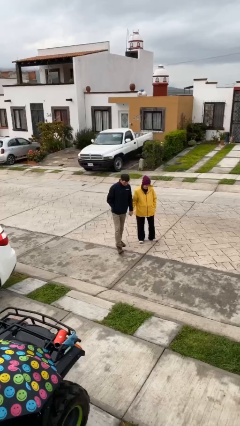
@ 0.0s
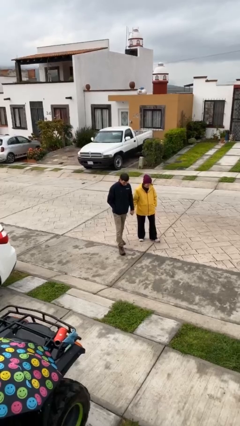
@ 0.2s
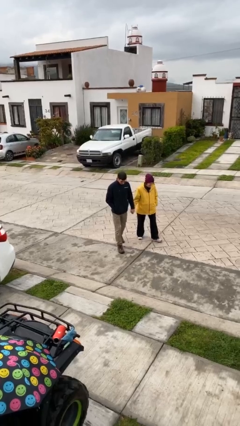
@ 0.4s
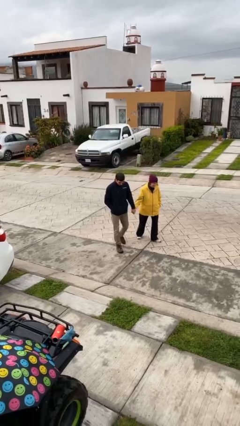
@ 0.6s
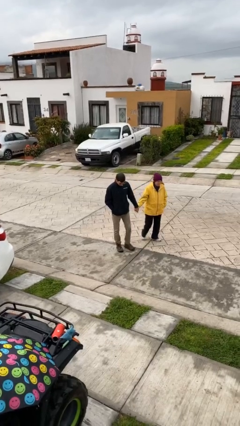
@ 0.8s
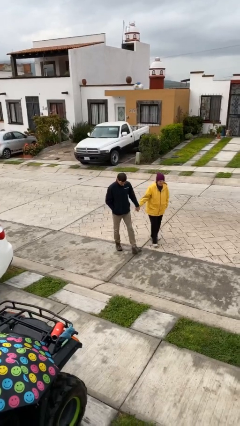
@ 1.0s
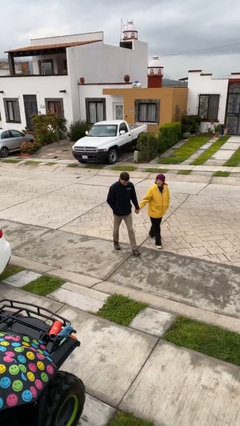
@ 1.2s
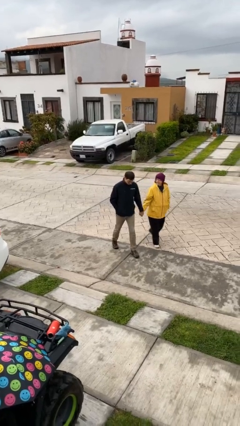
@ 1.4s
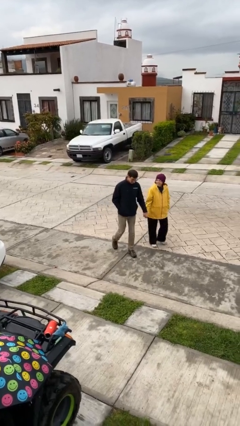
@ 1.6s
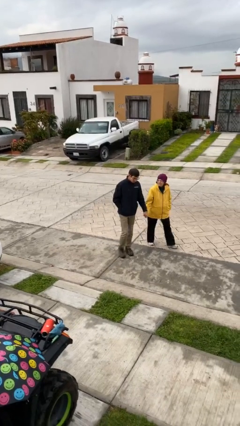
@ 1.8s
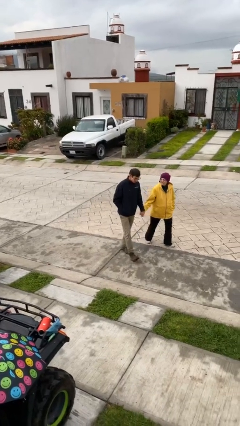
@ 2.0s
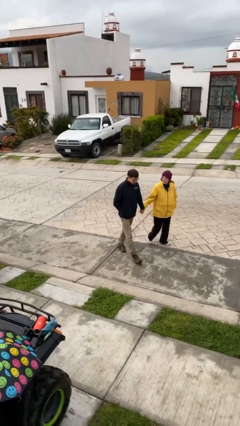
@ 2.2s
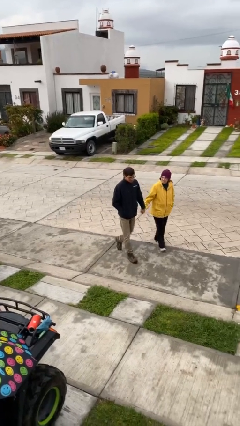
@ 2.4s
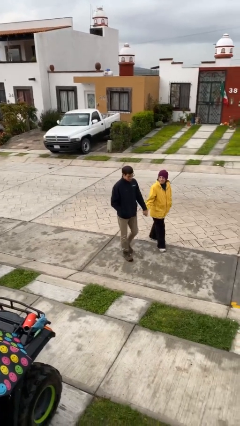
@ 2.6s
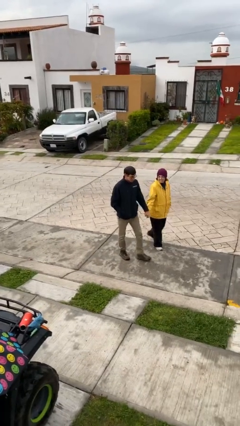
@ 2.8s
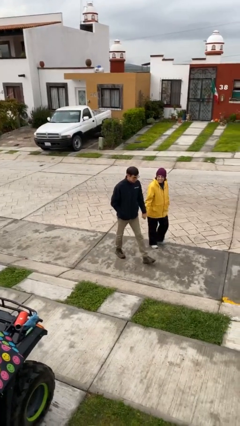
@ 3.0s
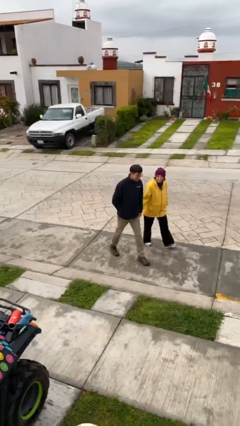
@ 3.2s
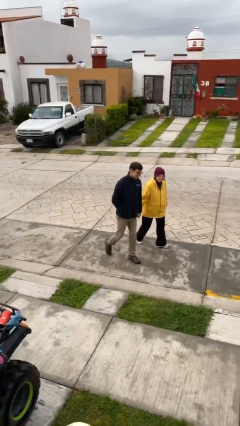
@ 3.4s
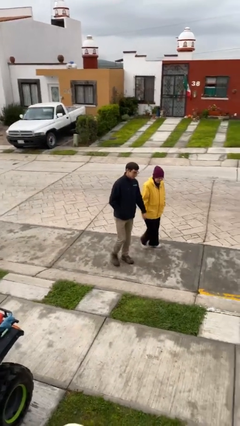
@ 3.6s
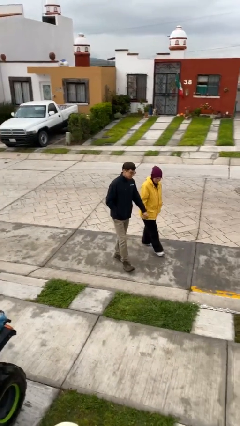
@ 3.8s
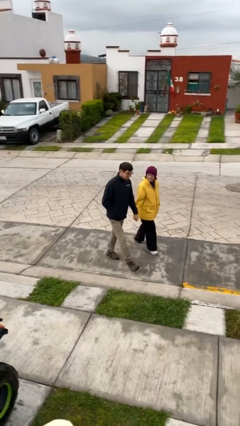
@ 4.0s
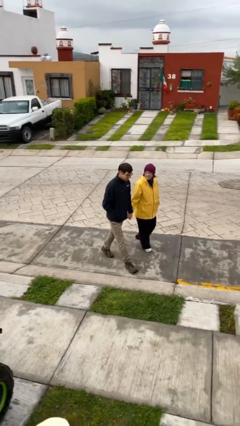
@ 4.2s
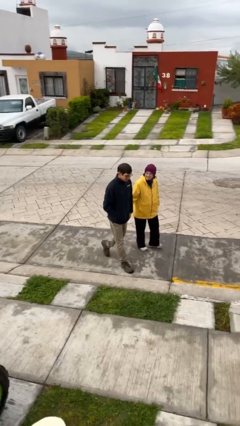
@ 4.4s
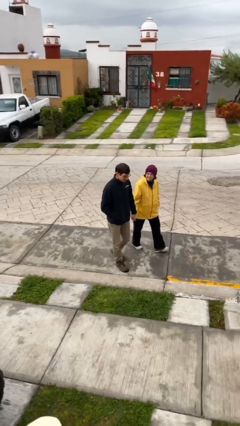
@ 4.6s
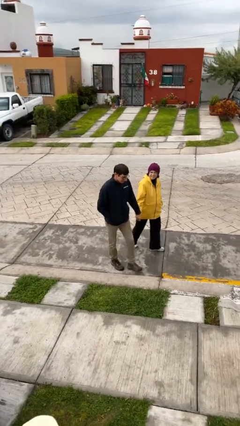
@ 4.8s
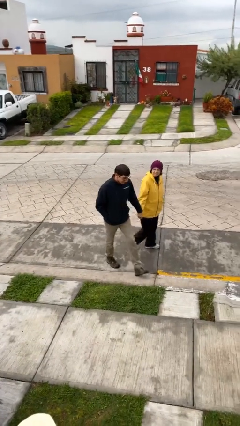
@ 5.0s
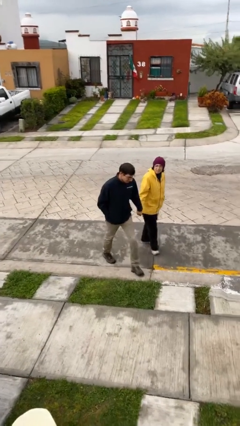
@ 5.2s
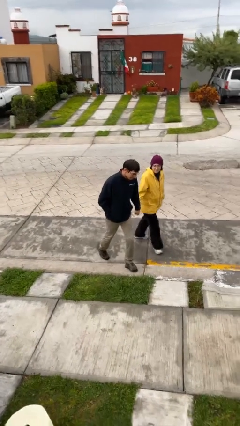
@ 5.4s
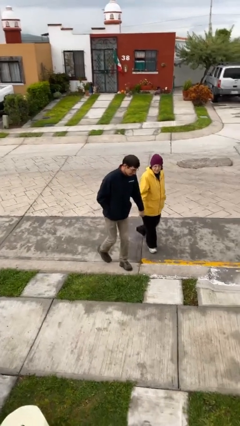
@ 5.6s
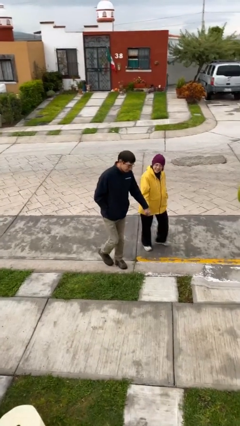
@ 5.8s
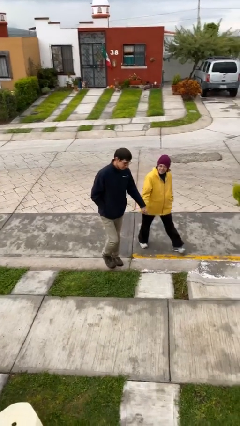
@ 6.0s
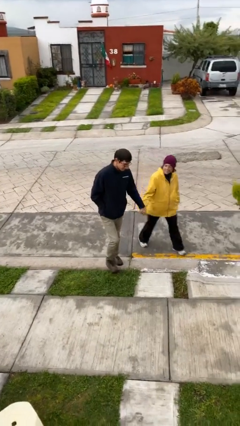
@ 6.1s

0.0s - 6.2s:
person holds hand

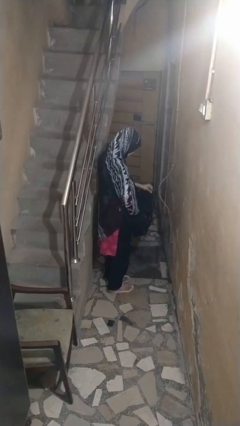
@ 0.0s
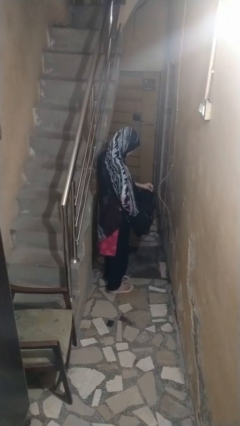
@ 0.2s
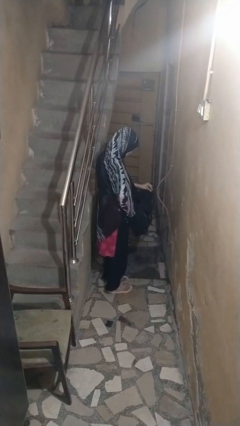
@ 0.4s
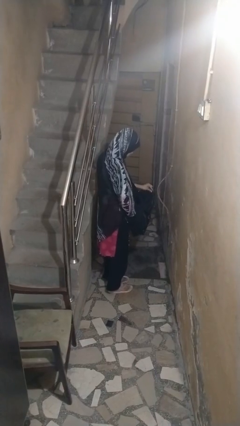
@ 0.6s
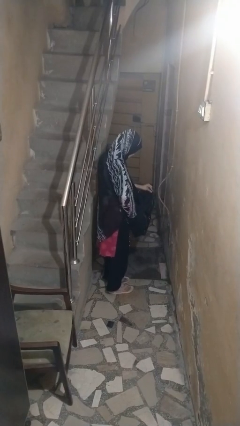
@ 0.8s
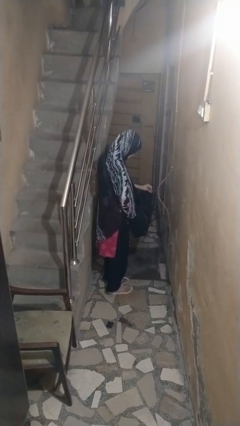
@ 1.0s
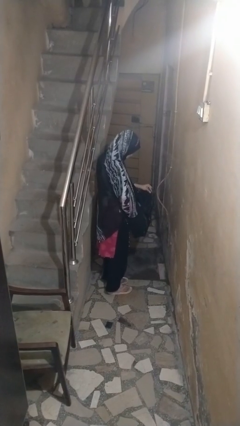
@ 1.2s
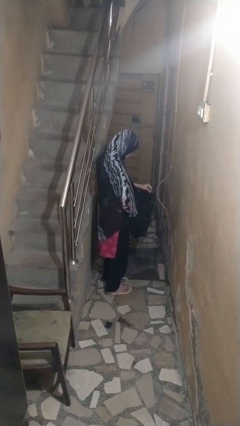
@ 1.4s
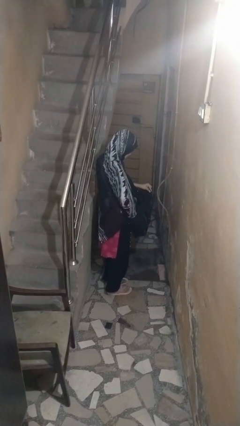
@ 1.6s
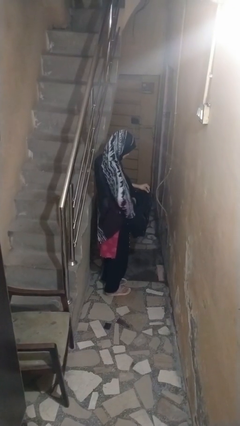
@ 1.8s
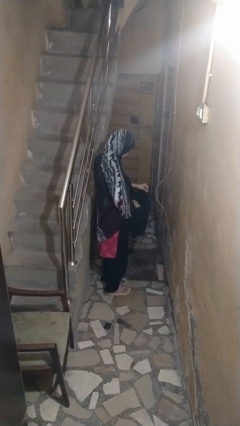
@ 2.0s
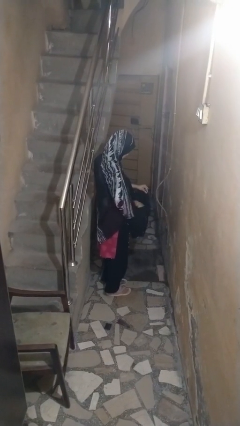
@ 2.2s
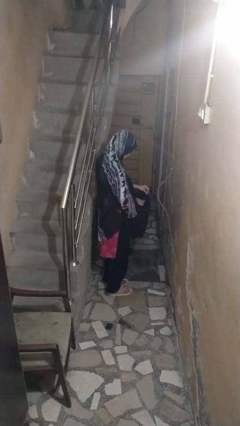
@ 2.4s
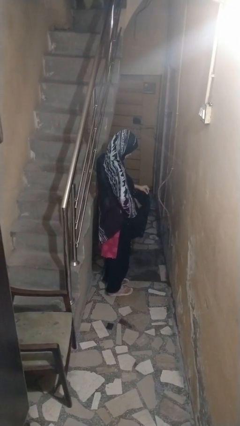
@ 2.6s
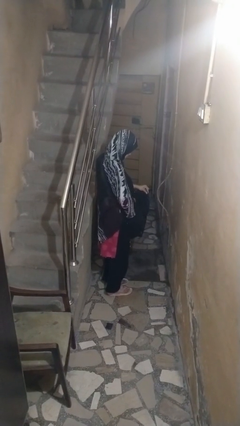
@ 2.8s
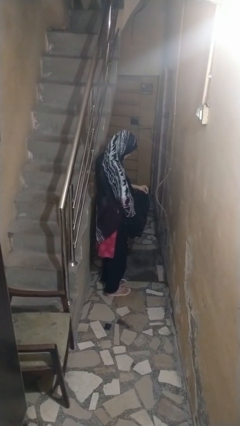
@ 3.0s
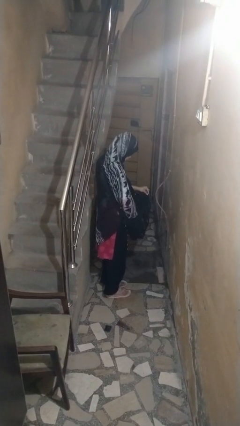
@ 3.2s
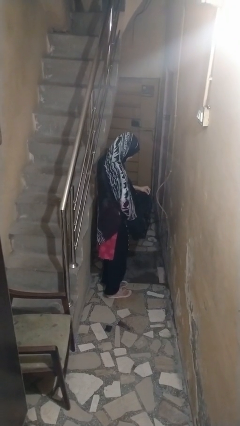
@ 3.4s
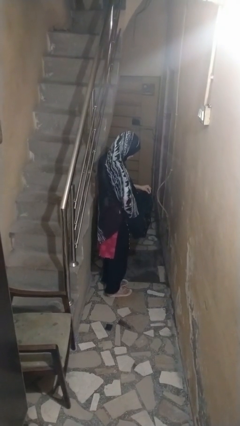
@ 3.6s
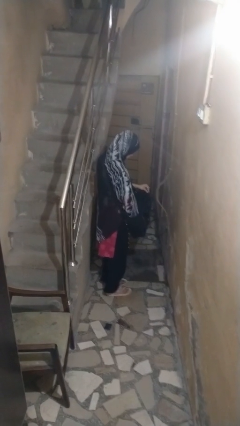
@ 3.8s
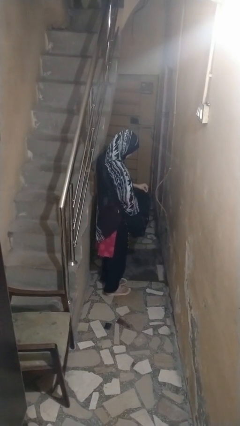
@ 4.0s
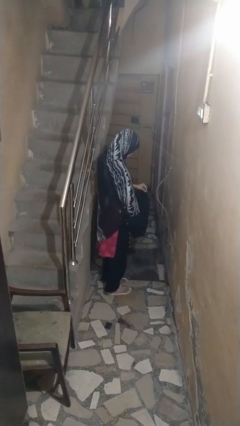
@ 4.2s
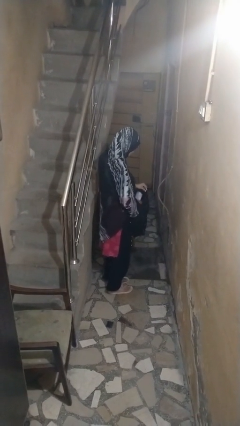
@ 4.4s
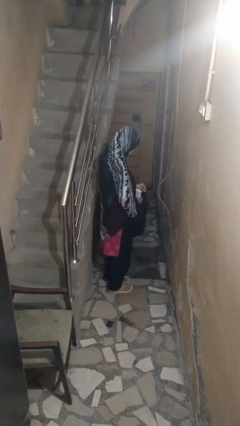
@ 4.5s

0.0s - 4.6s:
person searches in backpack

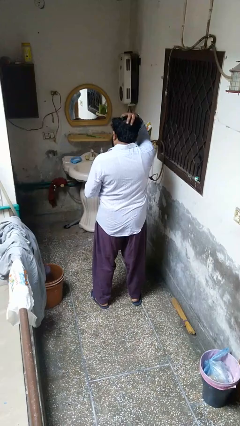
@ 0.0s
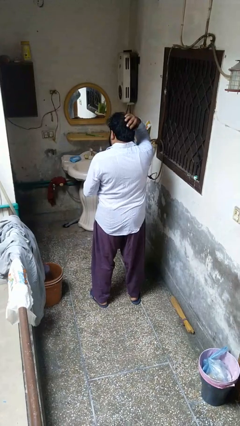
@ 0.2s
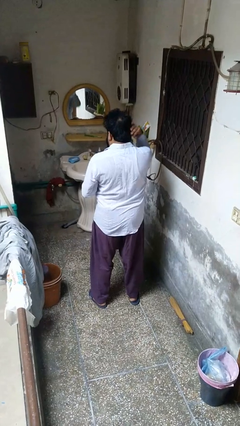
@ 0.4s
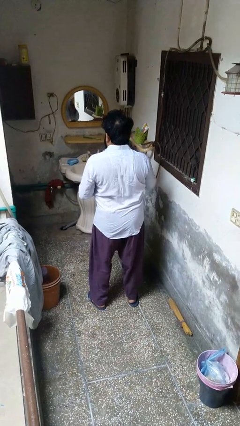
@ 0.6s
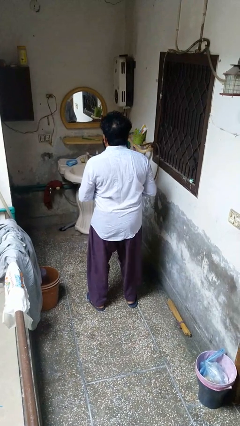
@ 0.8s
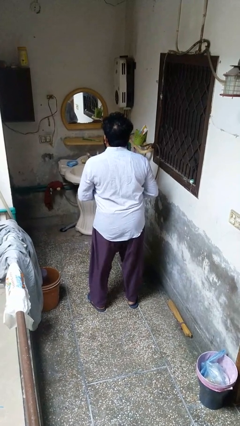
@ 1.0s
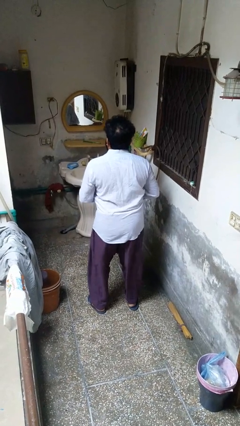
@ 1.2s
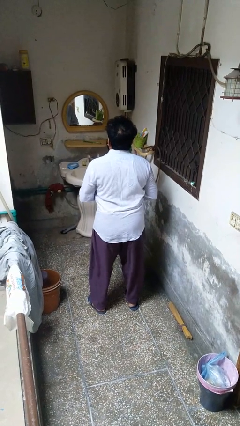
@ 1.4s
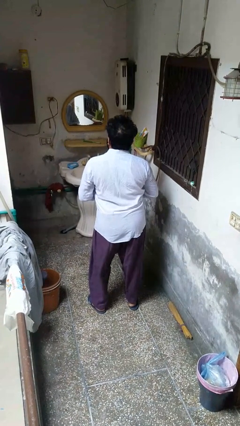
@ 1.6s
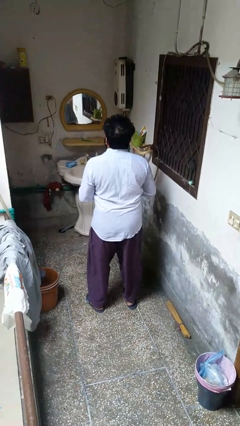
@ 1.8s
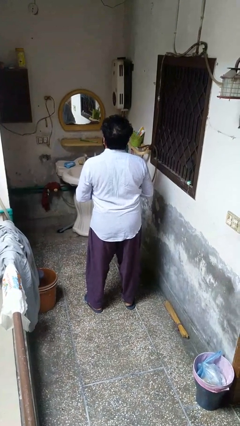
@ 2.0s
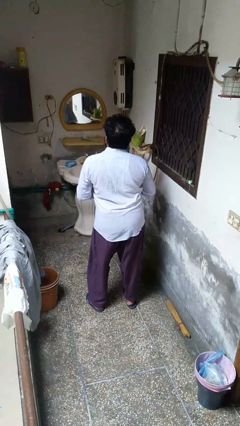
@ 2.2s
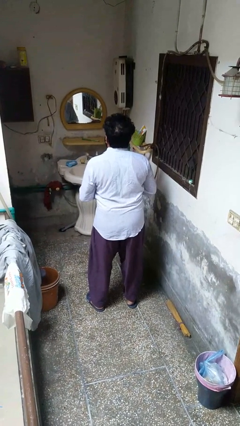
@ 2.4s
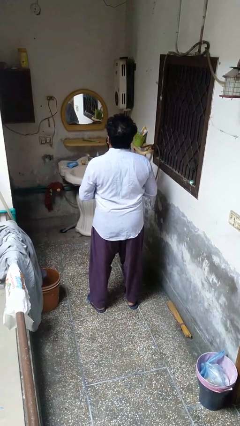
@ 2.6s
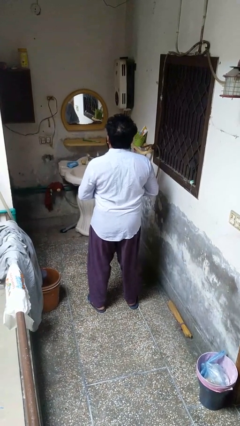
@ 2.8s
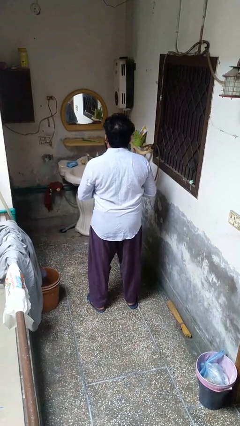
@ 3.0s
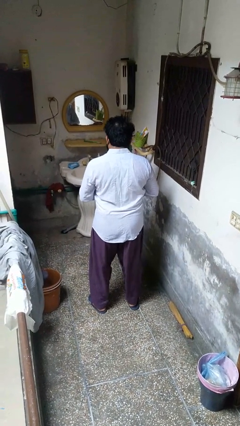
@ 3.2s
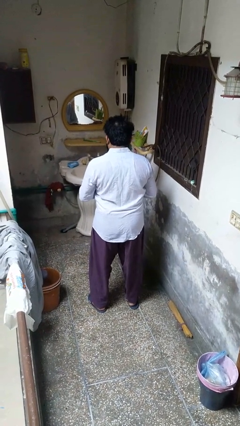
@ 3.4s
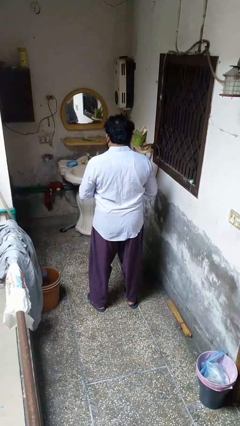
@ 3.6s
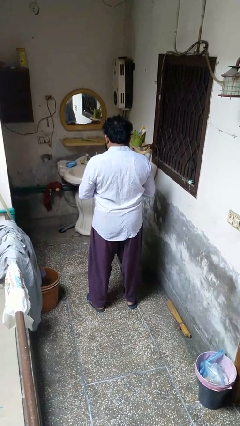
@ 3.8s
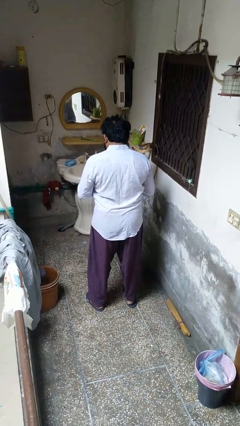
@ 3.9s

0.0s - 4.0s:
person wiggles hips

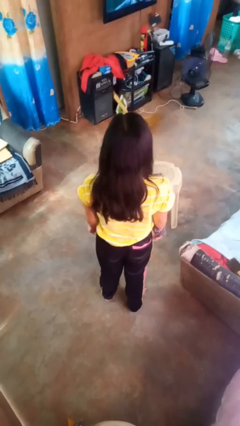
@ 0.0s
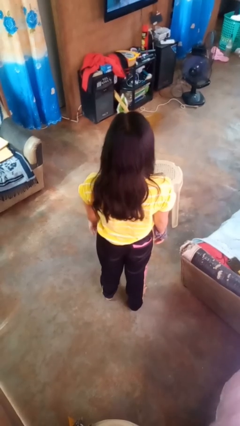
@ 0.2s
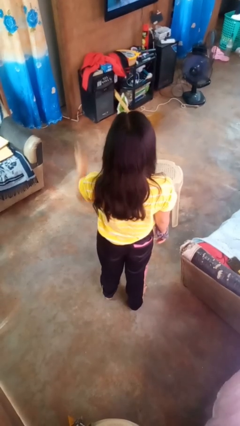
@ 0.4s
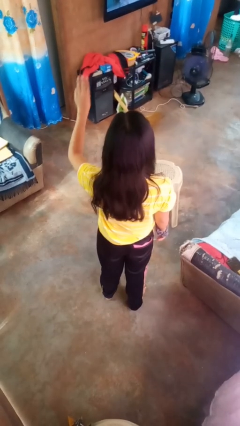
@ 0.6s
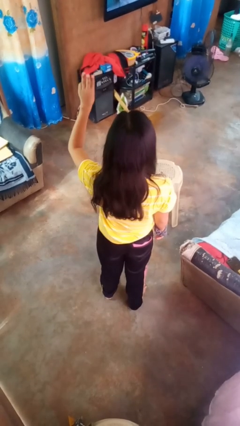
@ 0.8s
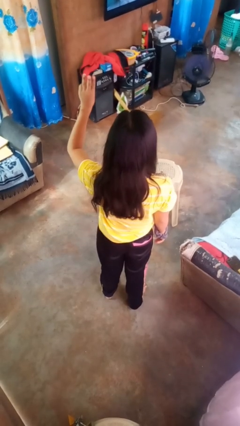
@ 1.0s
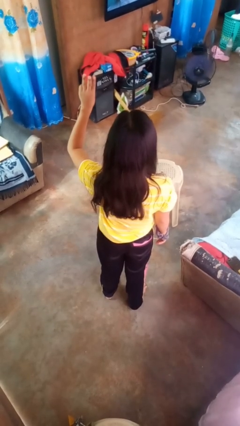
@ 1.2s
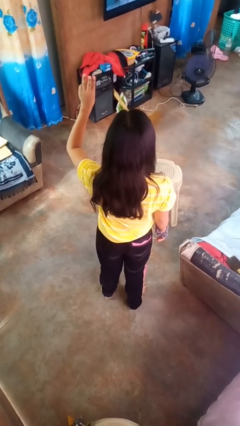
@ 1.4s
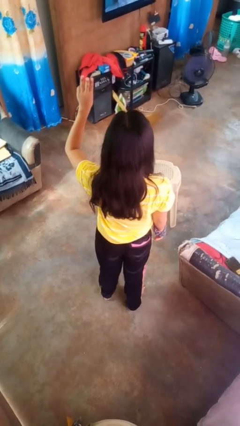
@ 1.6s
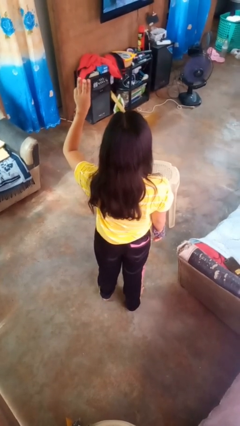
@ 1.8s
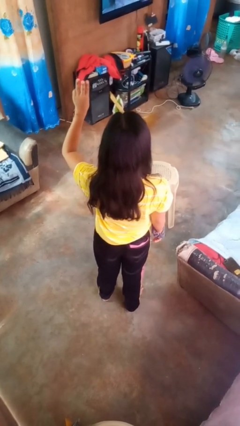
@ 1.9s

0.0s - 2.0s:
person gestures number three

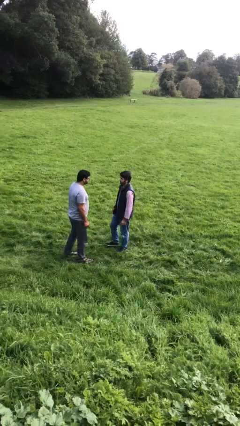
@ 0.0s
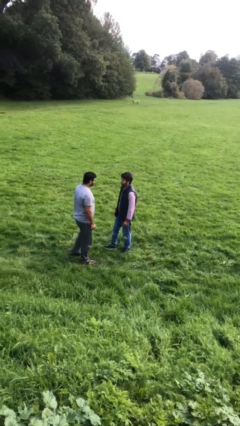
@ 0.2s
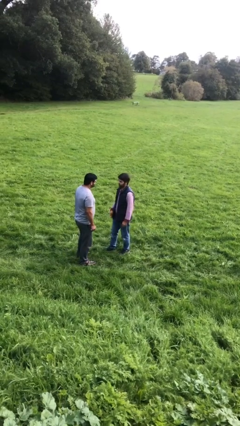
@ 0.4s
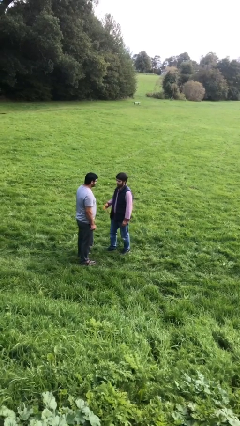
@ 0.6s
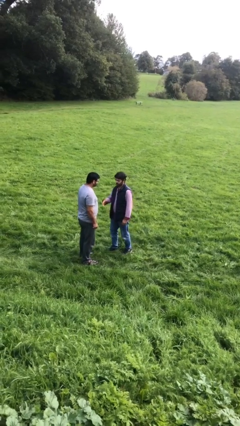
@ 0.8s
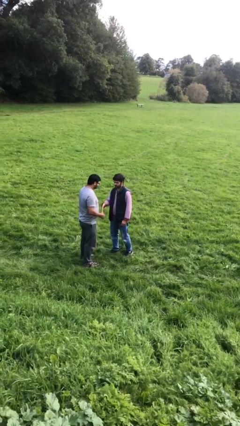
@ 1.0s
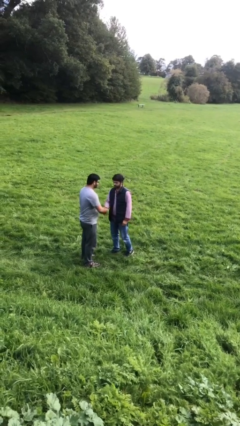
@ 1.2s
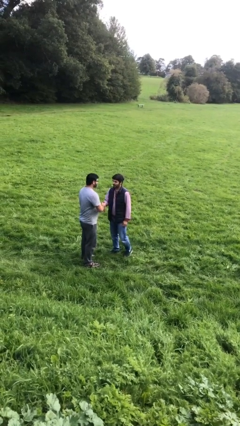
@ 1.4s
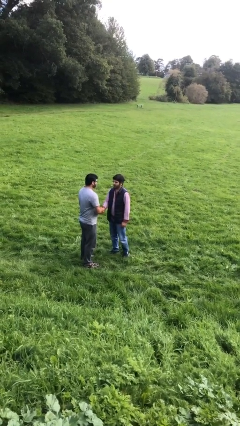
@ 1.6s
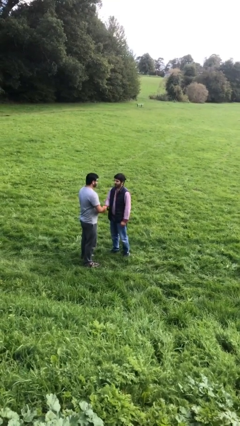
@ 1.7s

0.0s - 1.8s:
person shakes hand
